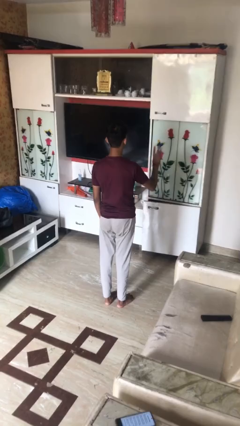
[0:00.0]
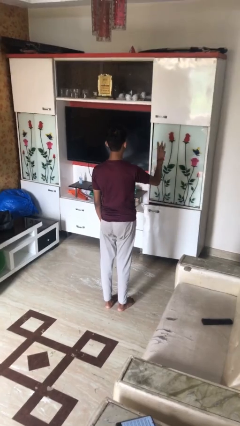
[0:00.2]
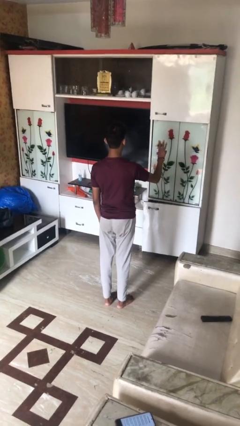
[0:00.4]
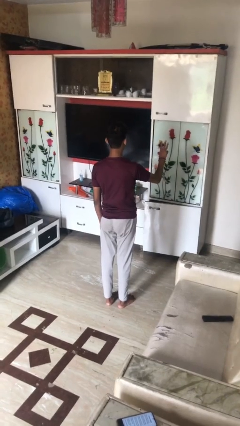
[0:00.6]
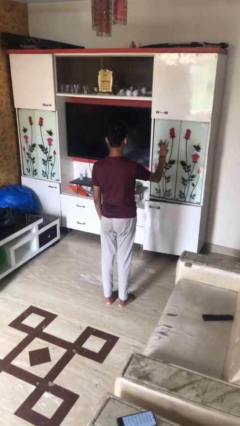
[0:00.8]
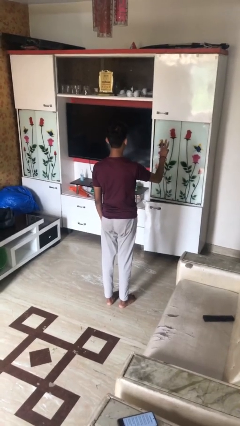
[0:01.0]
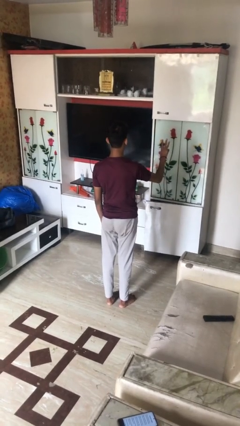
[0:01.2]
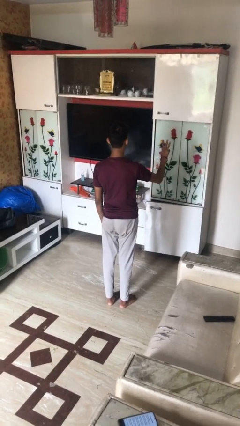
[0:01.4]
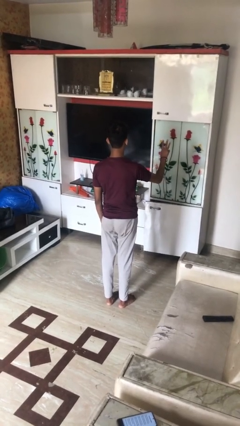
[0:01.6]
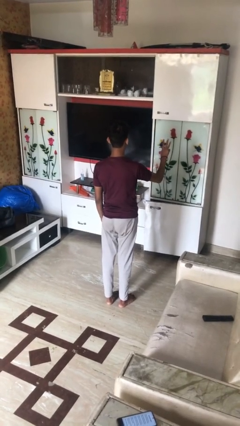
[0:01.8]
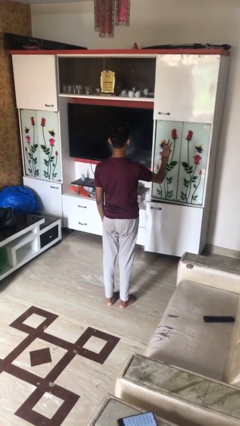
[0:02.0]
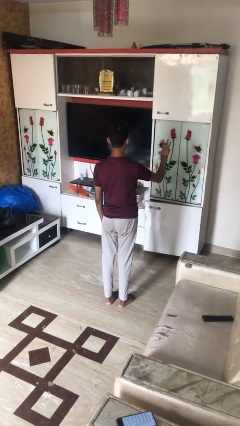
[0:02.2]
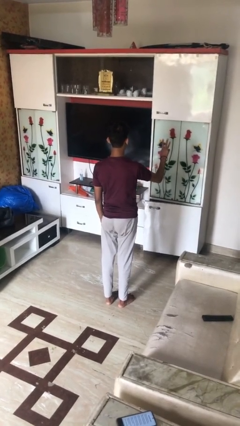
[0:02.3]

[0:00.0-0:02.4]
person gestures number three

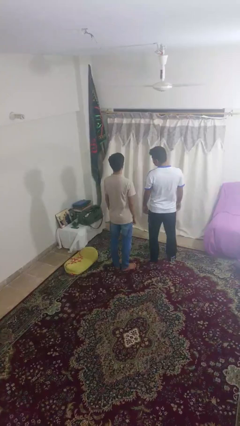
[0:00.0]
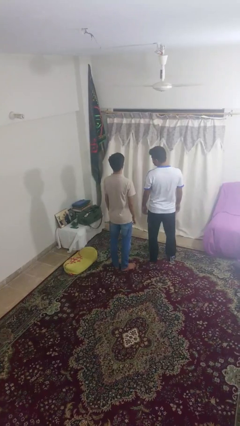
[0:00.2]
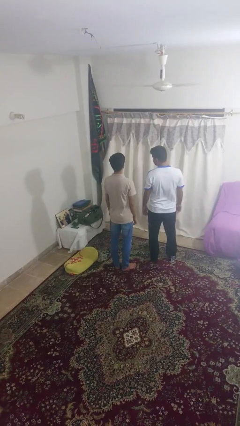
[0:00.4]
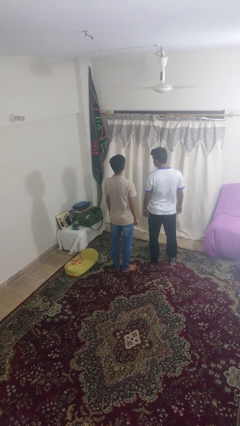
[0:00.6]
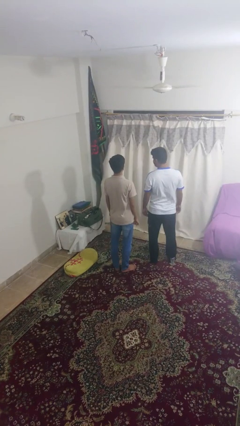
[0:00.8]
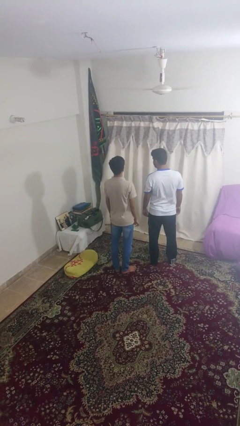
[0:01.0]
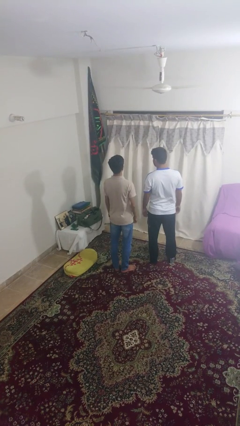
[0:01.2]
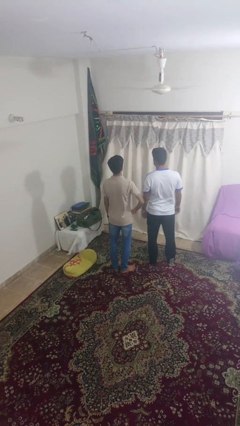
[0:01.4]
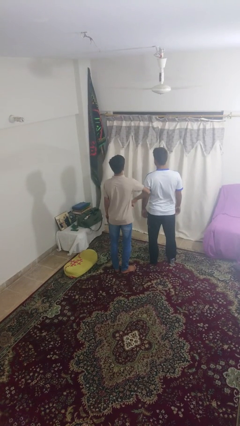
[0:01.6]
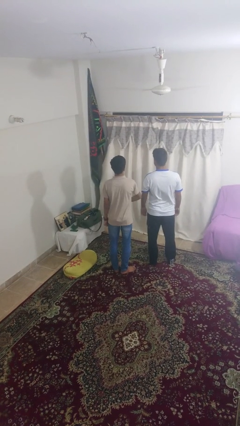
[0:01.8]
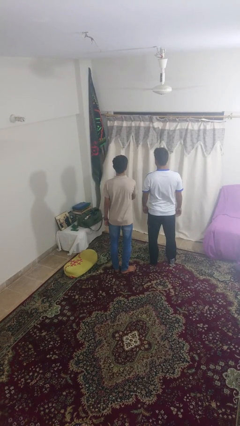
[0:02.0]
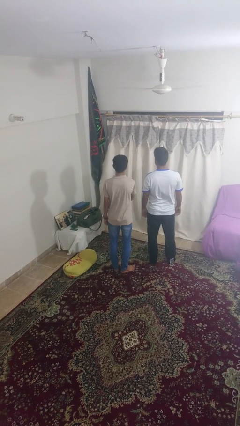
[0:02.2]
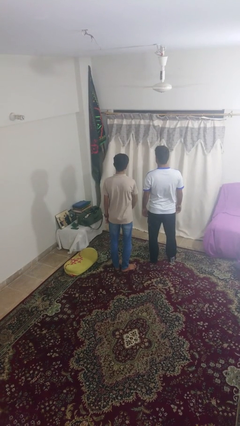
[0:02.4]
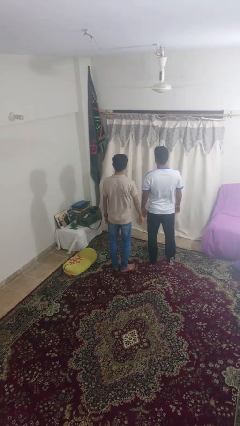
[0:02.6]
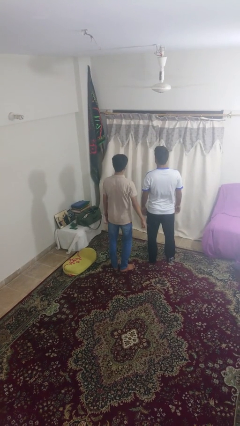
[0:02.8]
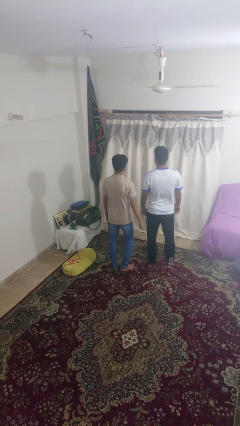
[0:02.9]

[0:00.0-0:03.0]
person nudges person with elbow

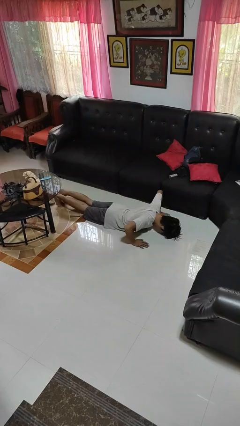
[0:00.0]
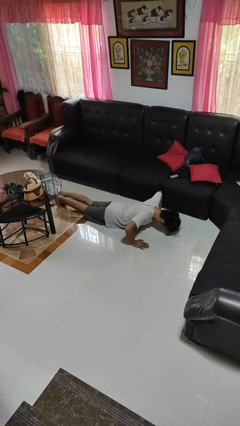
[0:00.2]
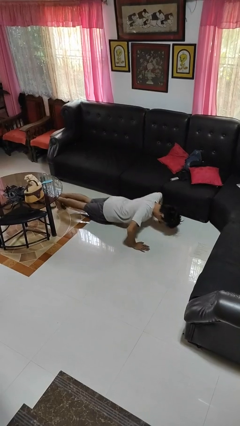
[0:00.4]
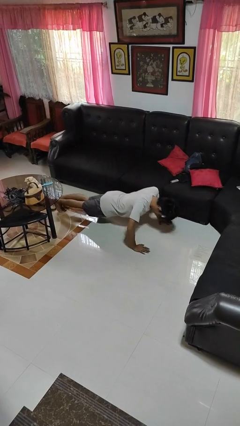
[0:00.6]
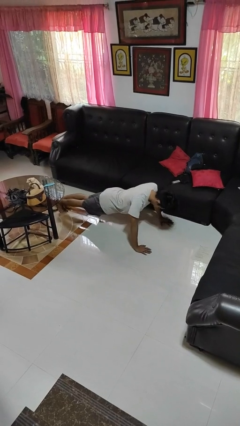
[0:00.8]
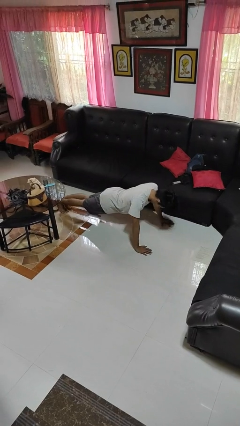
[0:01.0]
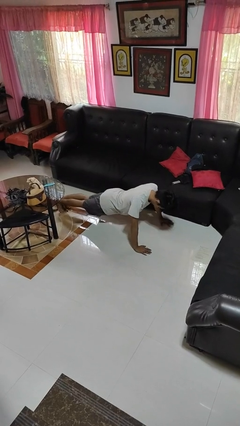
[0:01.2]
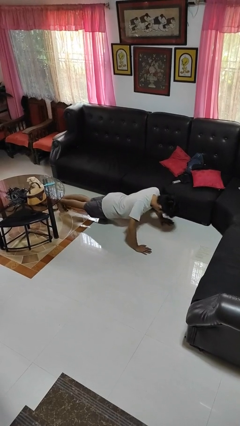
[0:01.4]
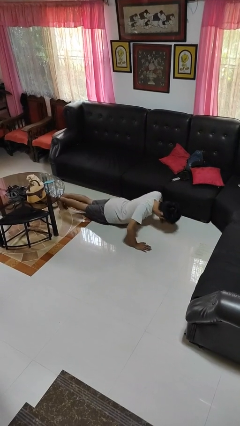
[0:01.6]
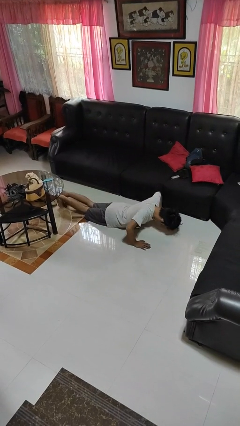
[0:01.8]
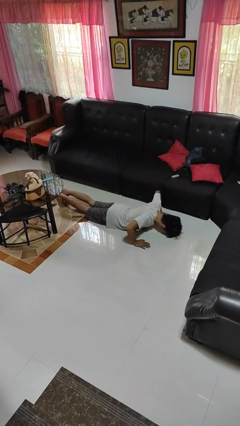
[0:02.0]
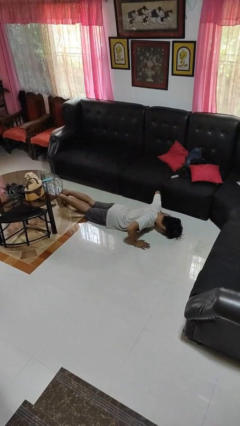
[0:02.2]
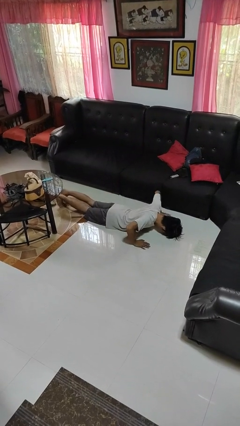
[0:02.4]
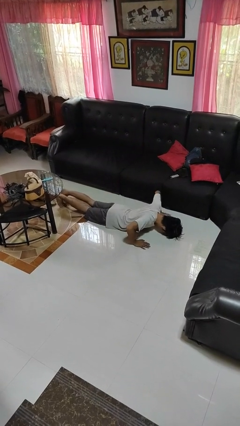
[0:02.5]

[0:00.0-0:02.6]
person exercises with pushup

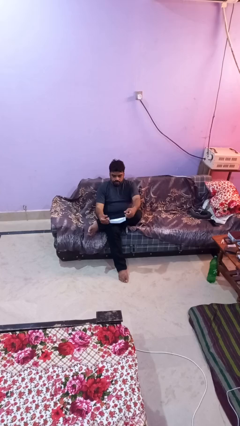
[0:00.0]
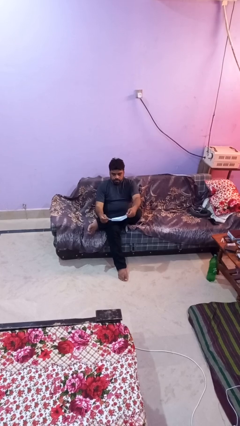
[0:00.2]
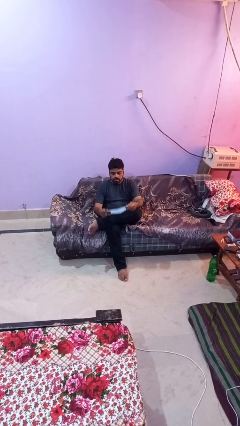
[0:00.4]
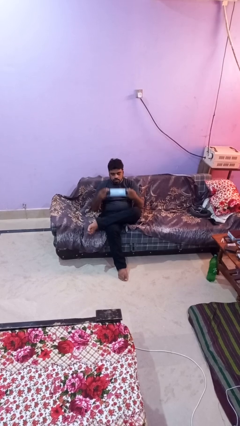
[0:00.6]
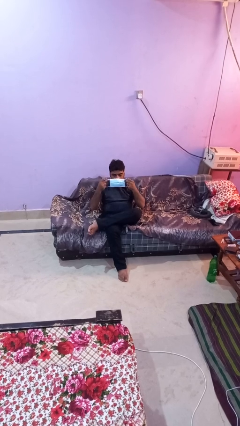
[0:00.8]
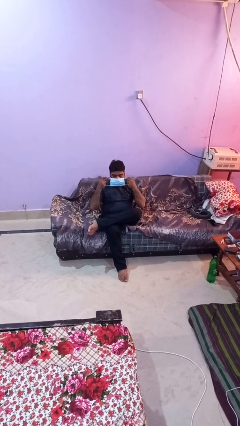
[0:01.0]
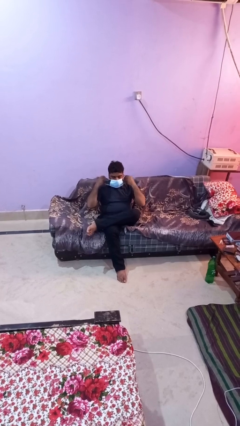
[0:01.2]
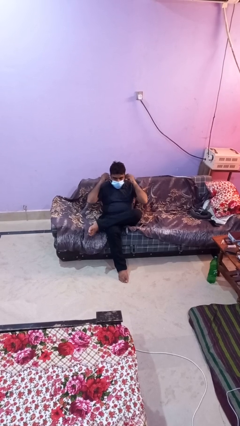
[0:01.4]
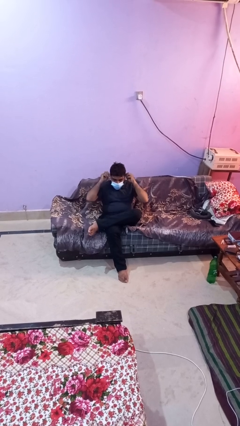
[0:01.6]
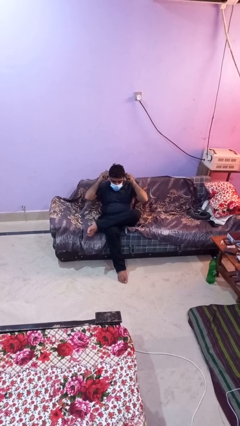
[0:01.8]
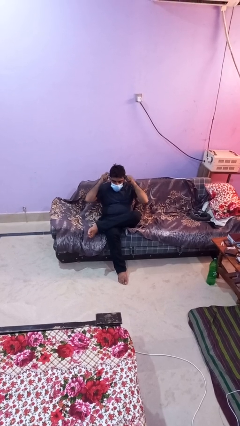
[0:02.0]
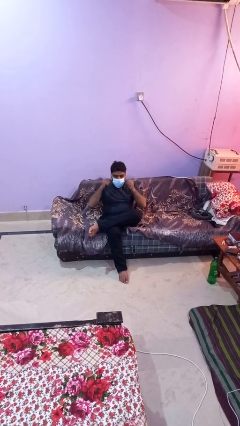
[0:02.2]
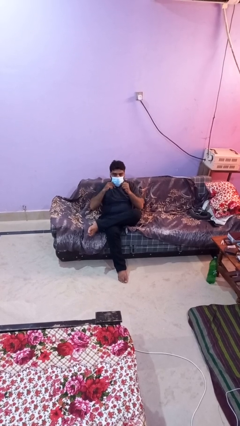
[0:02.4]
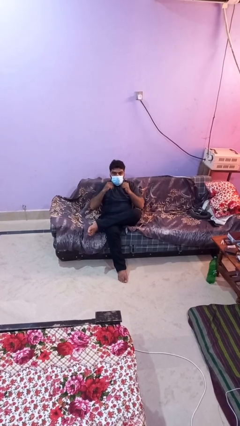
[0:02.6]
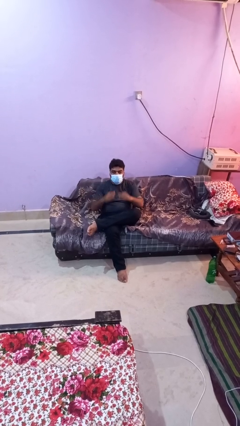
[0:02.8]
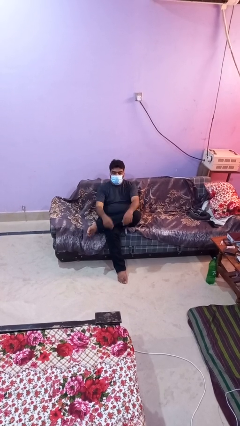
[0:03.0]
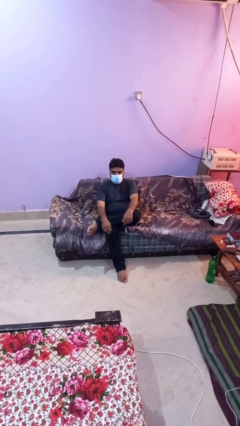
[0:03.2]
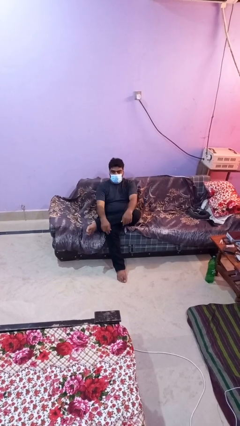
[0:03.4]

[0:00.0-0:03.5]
person puts on facemask

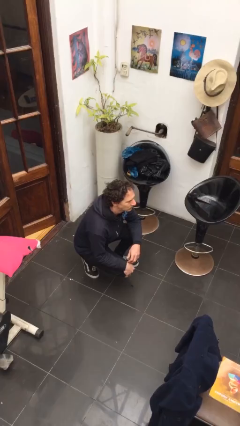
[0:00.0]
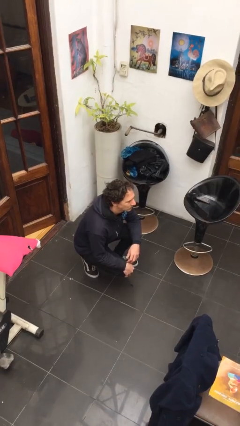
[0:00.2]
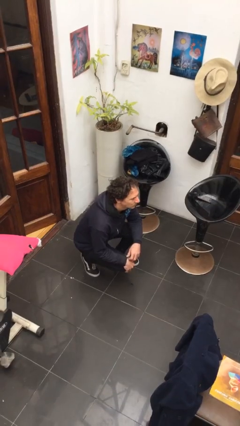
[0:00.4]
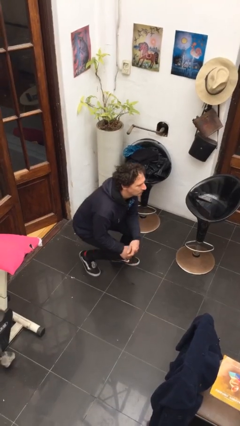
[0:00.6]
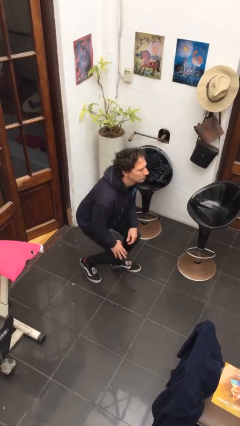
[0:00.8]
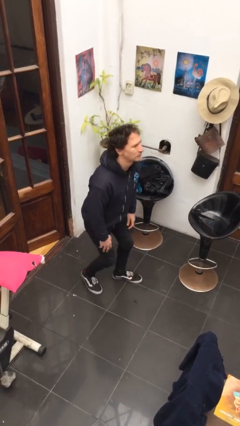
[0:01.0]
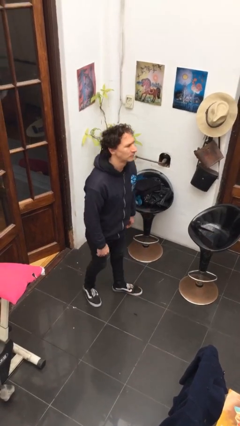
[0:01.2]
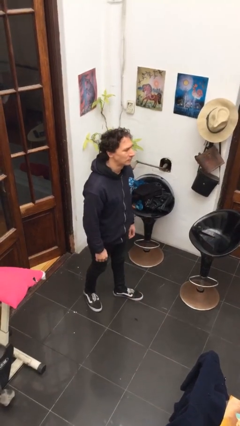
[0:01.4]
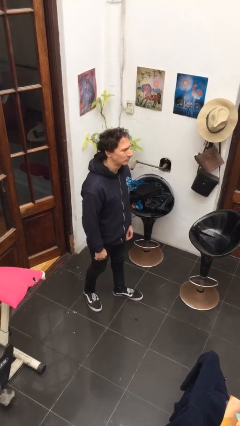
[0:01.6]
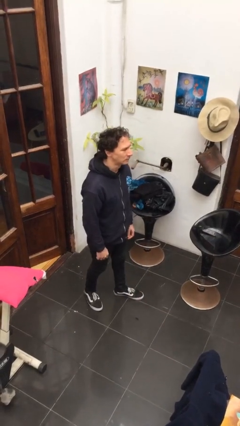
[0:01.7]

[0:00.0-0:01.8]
person stands up

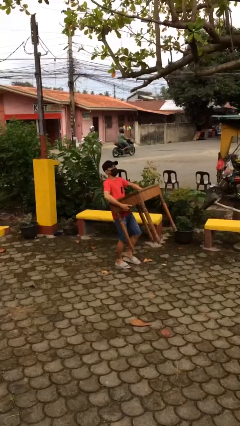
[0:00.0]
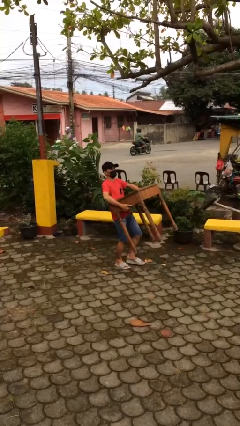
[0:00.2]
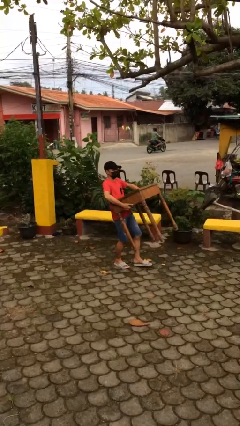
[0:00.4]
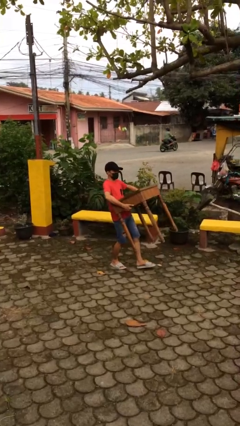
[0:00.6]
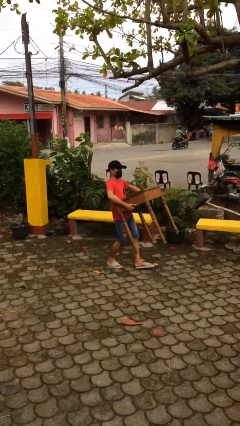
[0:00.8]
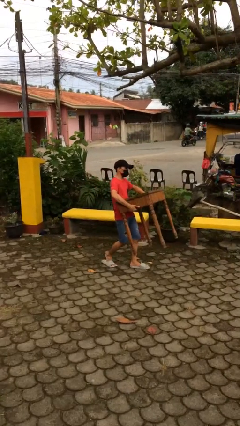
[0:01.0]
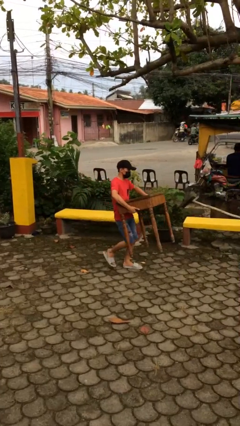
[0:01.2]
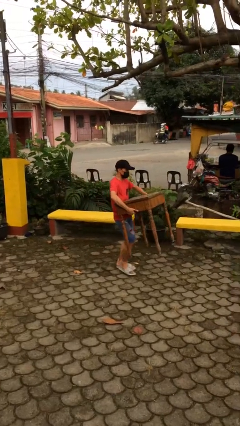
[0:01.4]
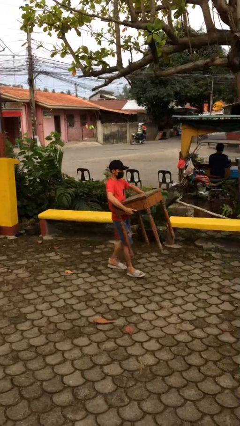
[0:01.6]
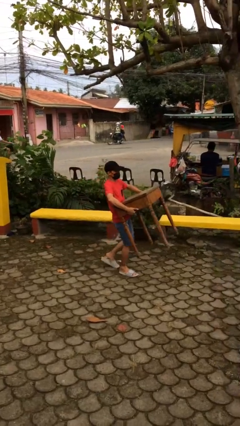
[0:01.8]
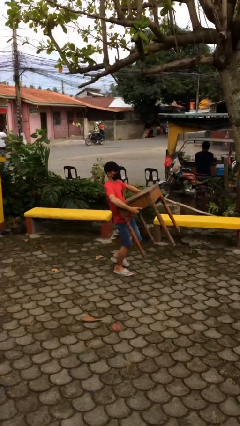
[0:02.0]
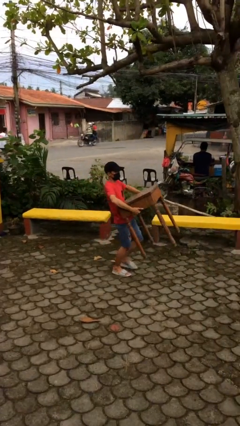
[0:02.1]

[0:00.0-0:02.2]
person carries heavy object

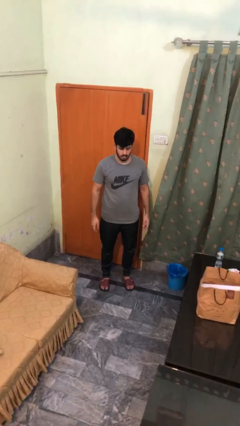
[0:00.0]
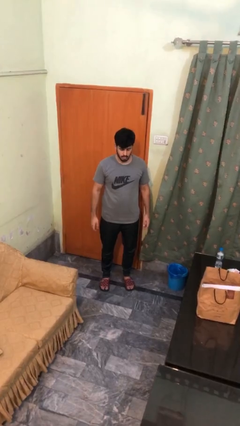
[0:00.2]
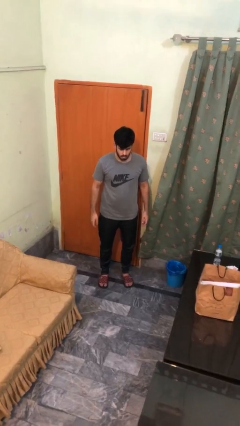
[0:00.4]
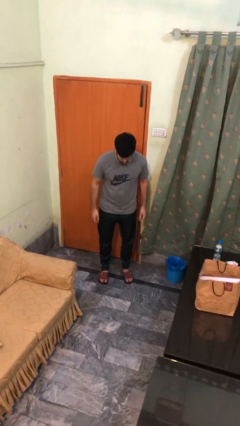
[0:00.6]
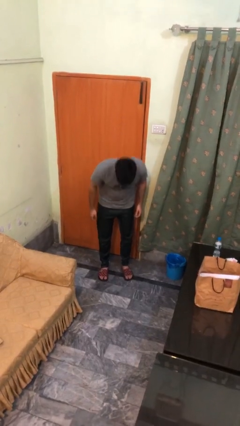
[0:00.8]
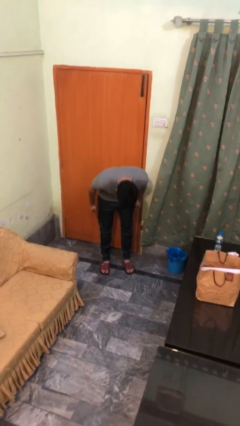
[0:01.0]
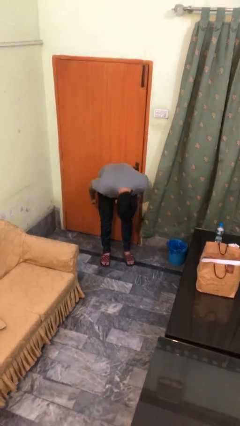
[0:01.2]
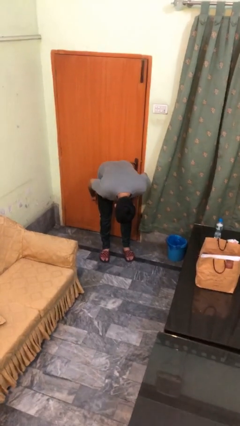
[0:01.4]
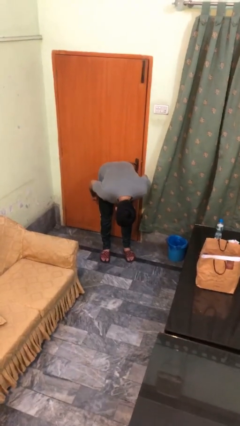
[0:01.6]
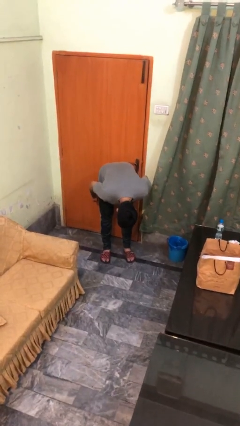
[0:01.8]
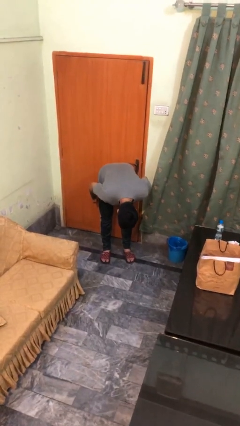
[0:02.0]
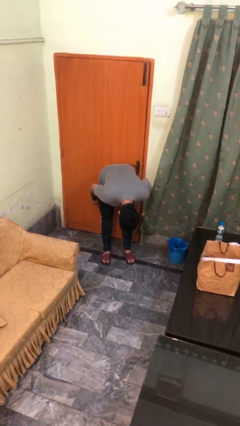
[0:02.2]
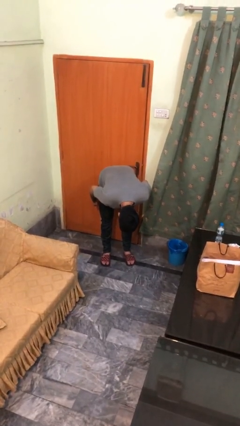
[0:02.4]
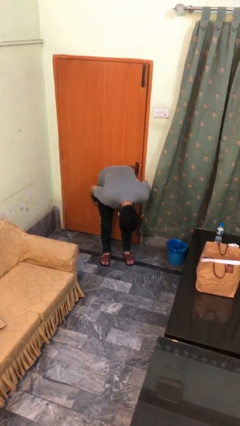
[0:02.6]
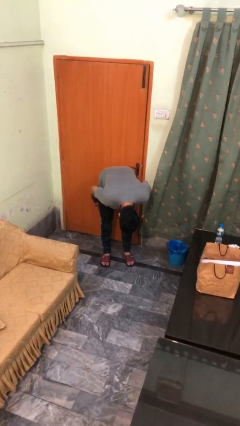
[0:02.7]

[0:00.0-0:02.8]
person bows
